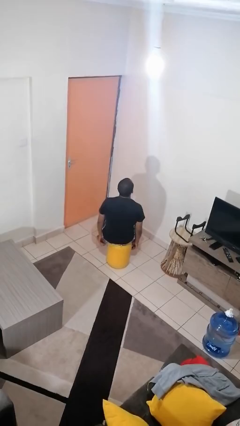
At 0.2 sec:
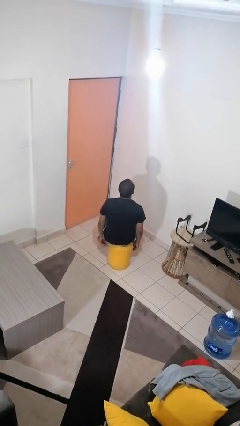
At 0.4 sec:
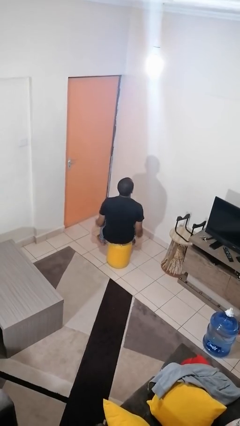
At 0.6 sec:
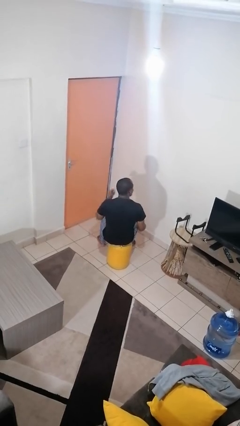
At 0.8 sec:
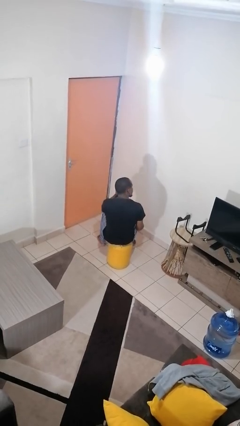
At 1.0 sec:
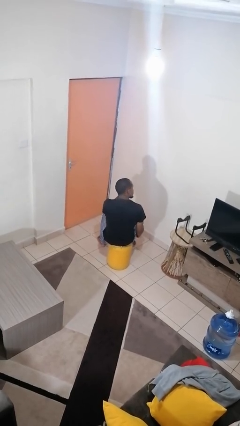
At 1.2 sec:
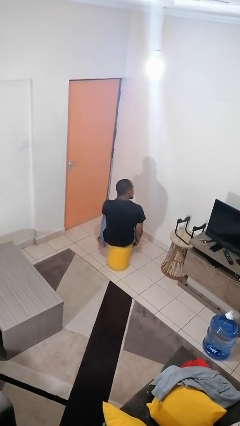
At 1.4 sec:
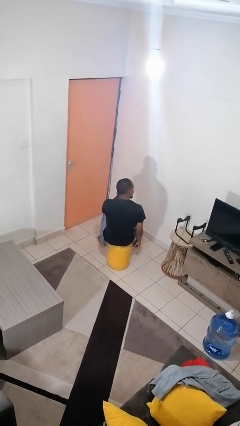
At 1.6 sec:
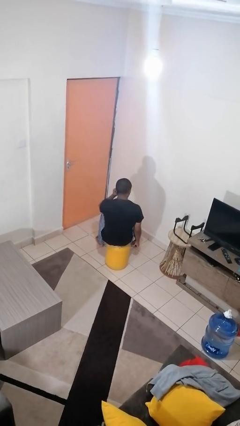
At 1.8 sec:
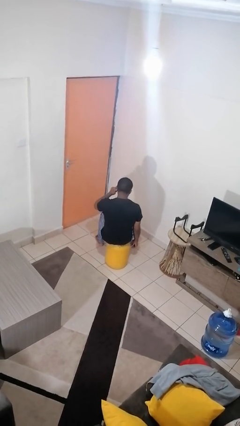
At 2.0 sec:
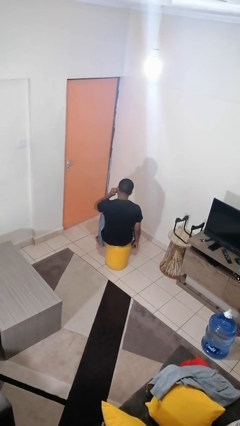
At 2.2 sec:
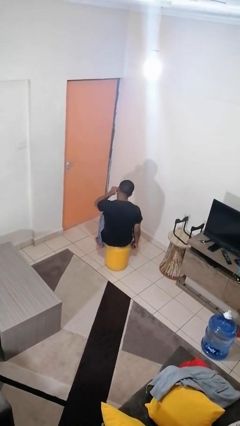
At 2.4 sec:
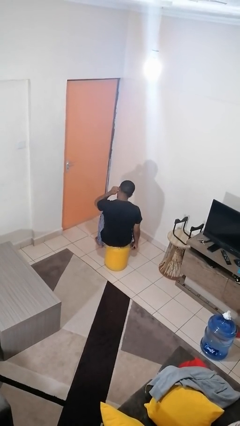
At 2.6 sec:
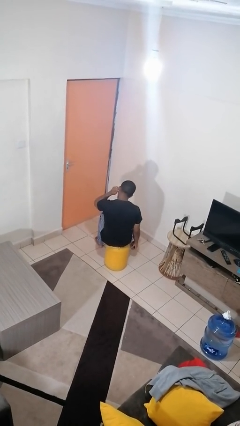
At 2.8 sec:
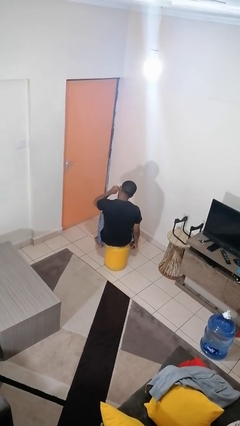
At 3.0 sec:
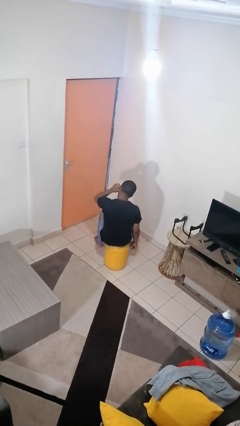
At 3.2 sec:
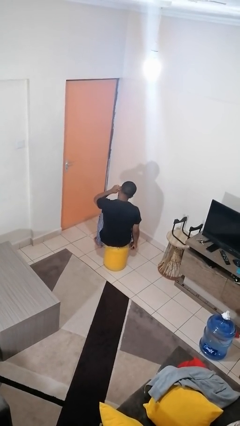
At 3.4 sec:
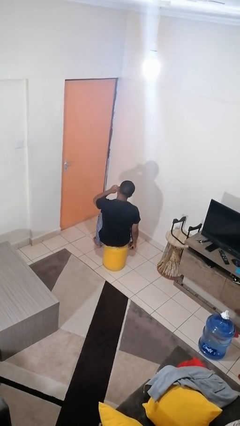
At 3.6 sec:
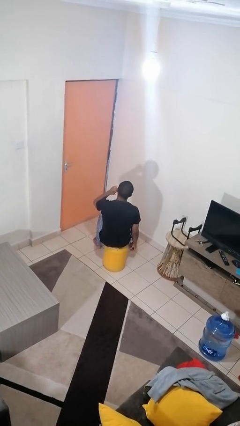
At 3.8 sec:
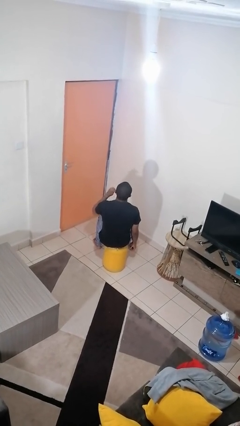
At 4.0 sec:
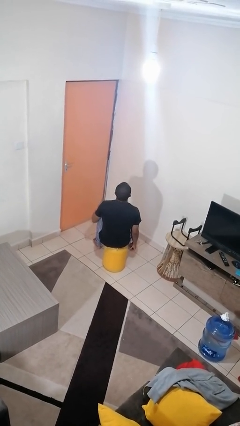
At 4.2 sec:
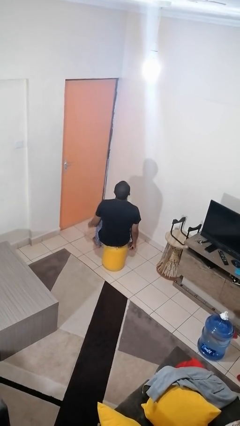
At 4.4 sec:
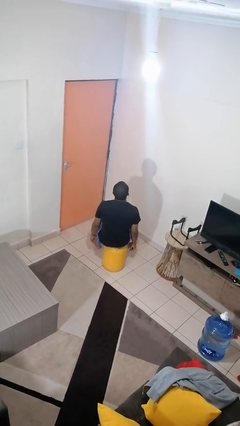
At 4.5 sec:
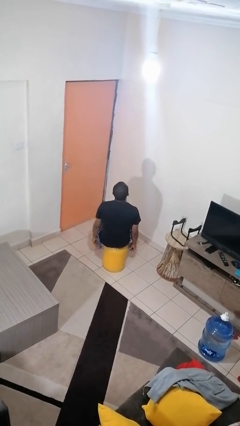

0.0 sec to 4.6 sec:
person touches earlobe

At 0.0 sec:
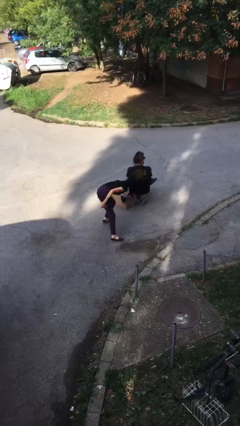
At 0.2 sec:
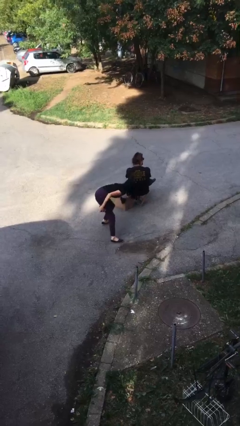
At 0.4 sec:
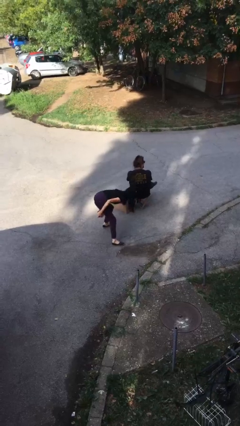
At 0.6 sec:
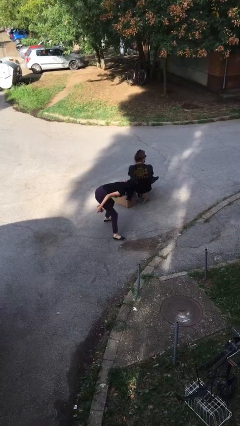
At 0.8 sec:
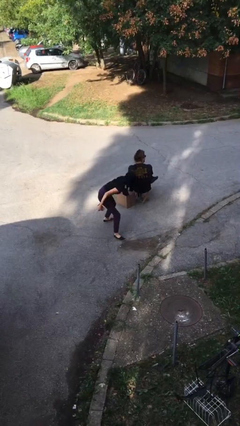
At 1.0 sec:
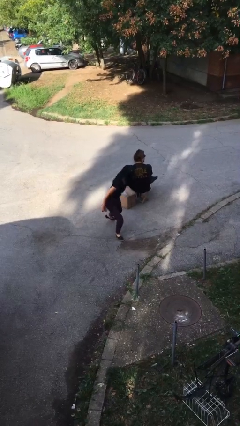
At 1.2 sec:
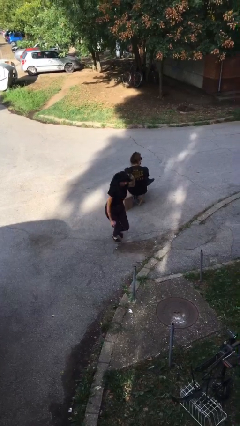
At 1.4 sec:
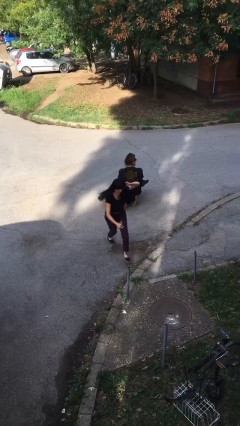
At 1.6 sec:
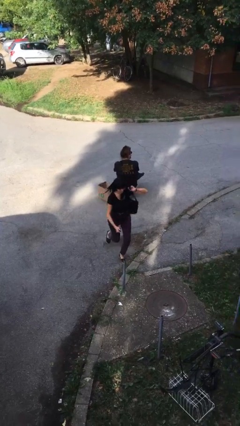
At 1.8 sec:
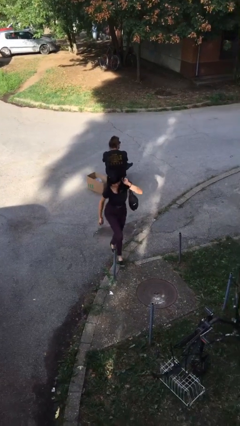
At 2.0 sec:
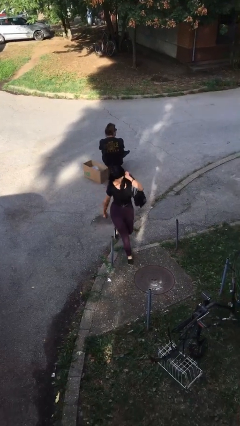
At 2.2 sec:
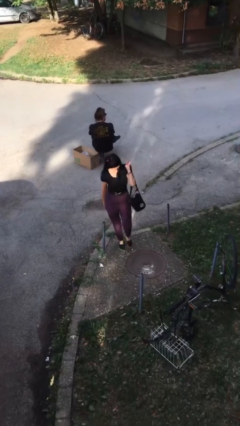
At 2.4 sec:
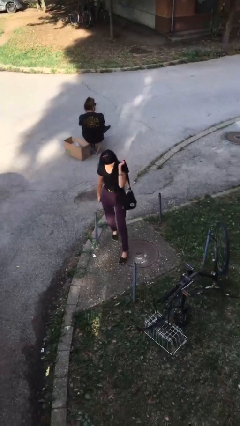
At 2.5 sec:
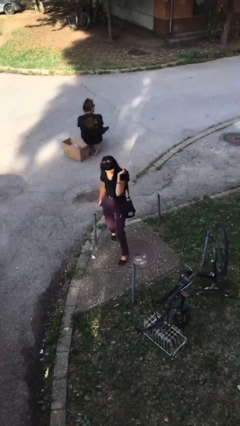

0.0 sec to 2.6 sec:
person steals object from person

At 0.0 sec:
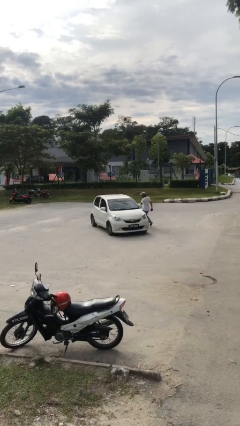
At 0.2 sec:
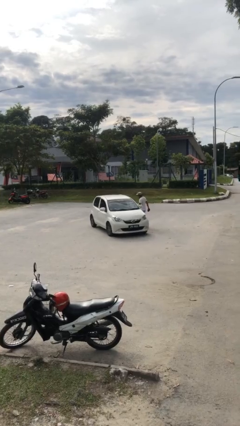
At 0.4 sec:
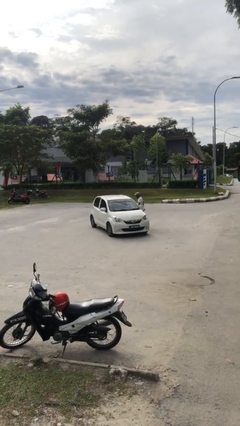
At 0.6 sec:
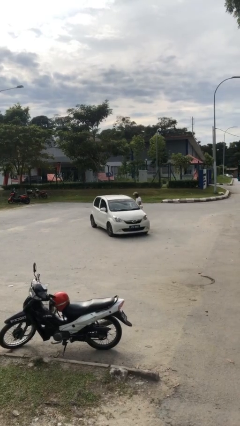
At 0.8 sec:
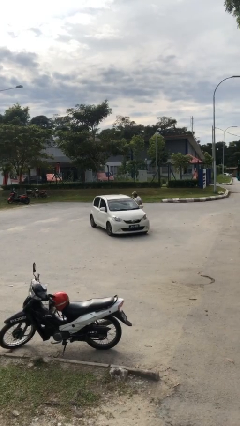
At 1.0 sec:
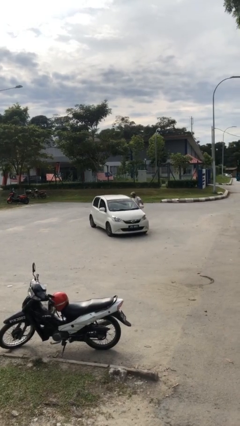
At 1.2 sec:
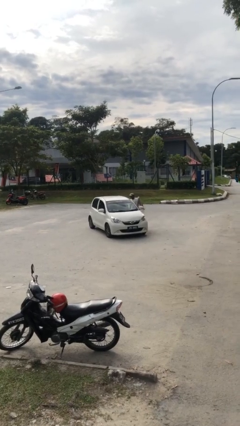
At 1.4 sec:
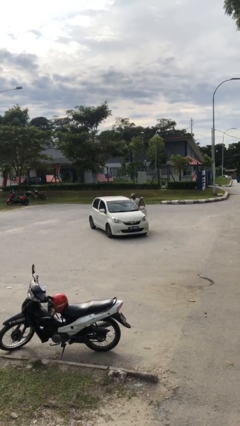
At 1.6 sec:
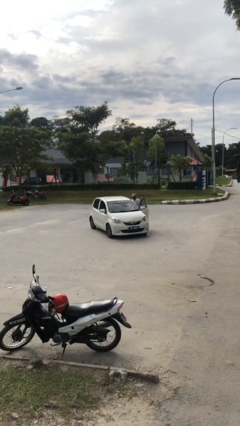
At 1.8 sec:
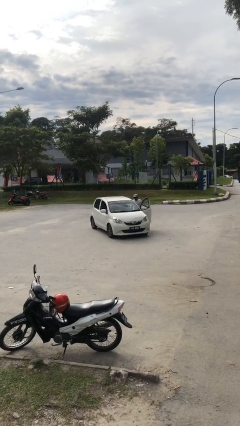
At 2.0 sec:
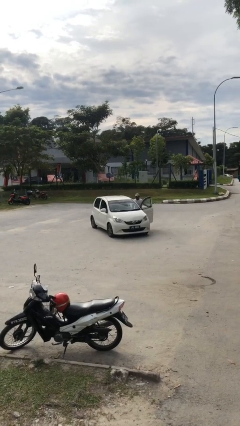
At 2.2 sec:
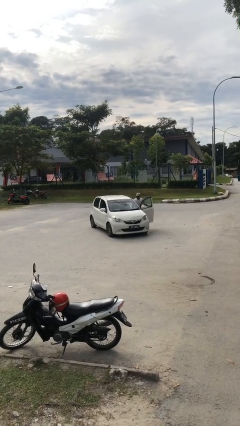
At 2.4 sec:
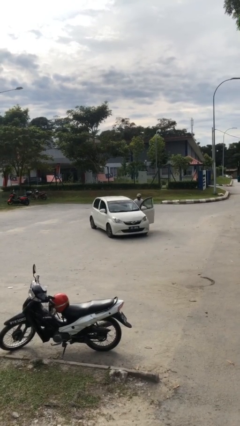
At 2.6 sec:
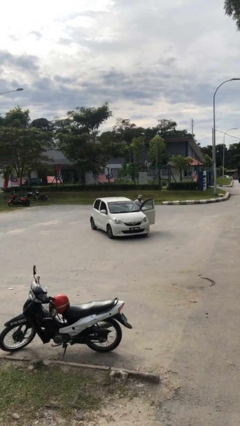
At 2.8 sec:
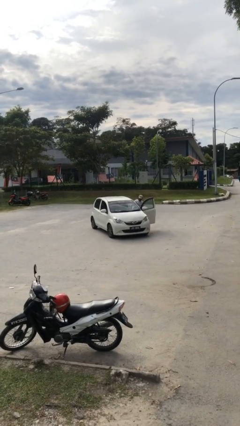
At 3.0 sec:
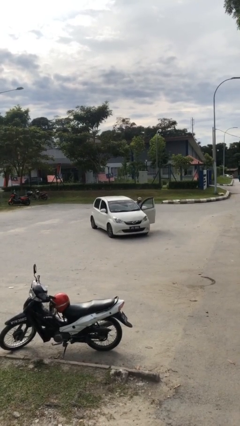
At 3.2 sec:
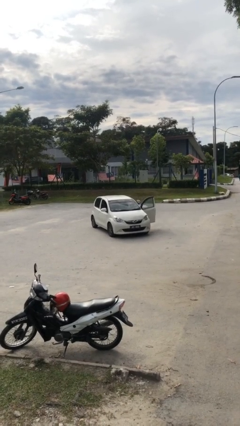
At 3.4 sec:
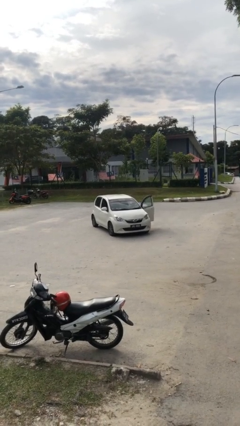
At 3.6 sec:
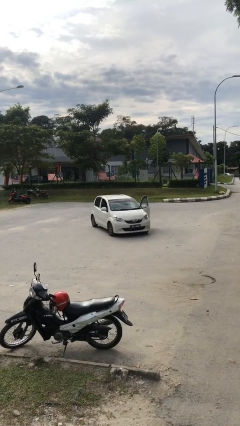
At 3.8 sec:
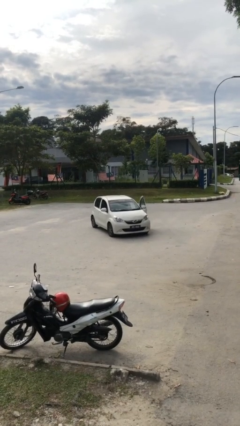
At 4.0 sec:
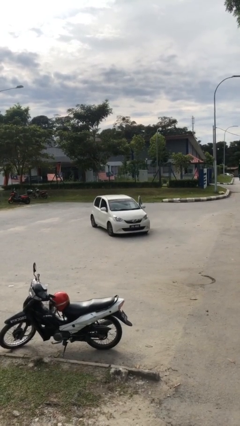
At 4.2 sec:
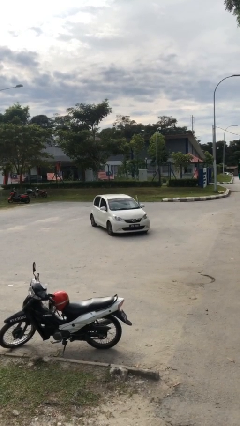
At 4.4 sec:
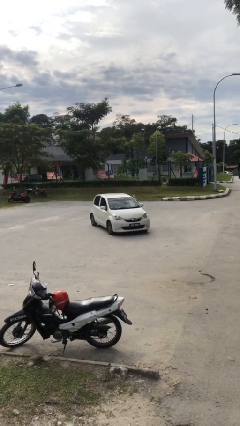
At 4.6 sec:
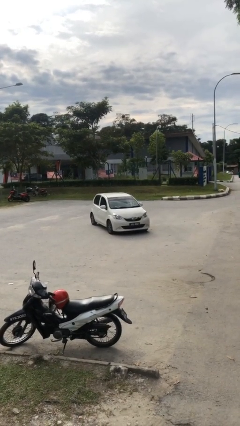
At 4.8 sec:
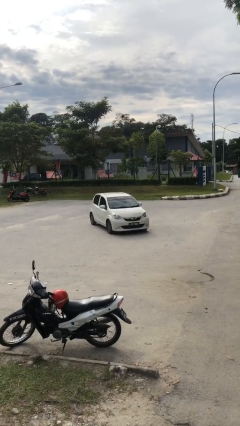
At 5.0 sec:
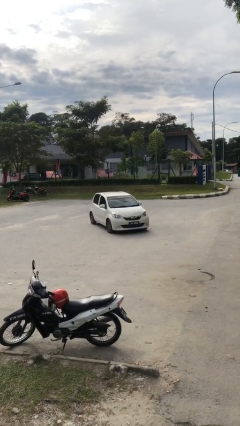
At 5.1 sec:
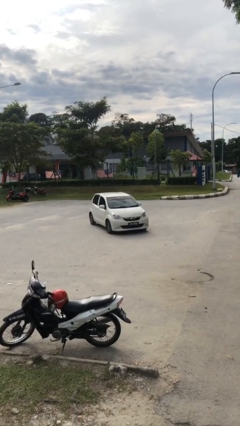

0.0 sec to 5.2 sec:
car picks up person

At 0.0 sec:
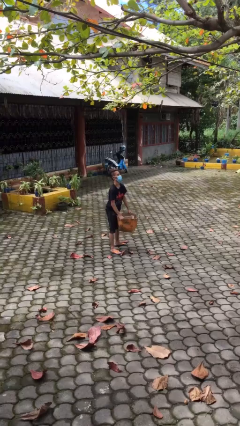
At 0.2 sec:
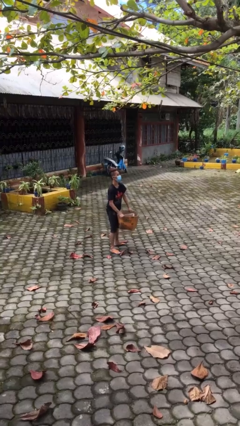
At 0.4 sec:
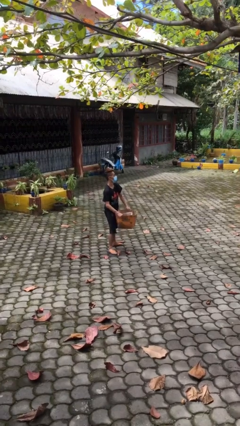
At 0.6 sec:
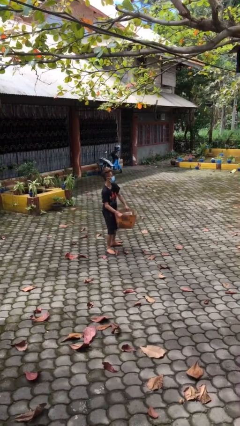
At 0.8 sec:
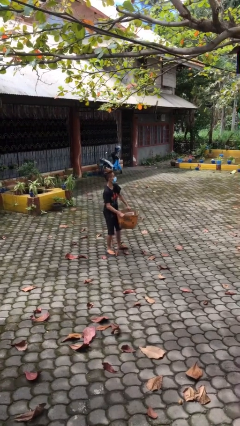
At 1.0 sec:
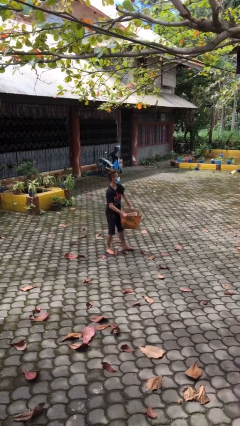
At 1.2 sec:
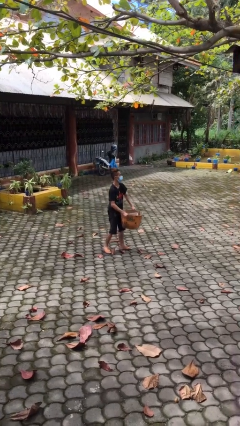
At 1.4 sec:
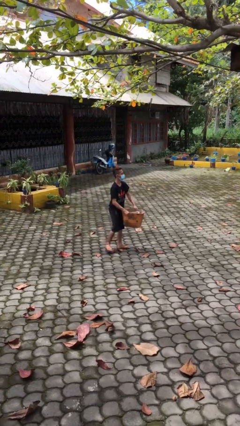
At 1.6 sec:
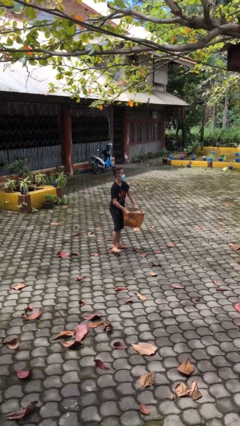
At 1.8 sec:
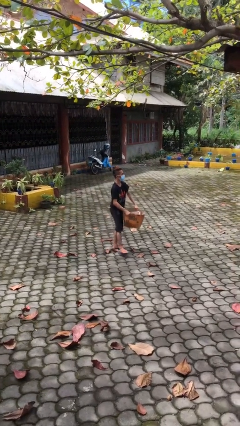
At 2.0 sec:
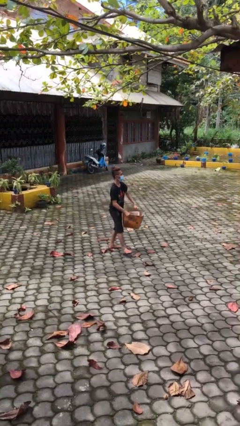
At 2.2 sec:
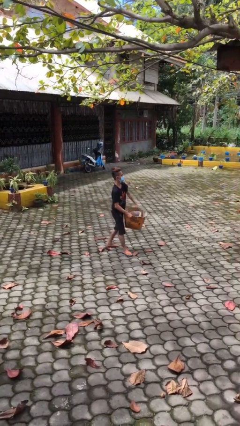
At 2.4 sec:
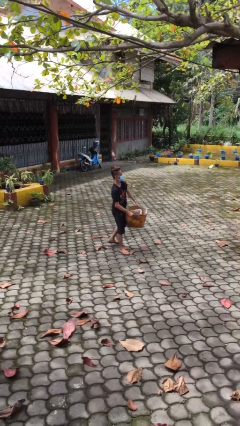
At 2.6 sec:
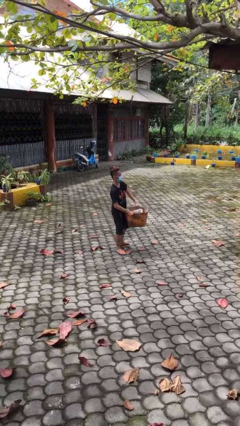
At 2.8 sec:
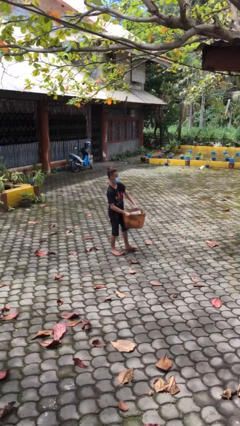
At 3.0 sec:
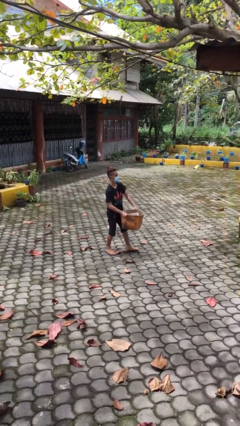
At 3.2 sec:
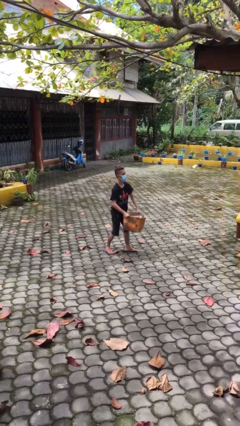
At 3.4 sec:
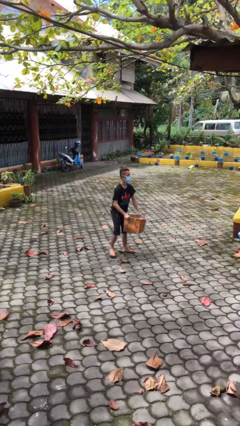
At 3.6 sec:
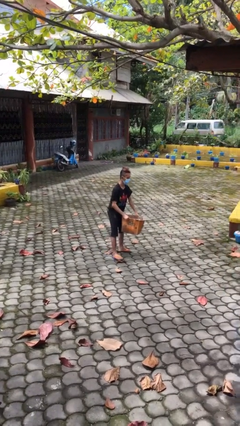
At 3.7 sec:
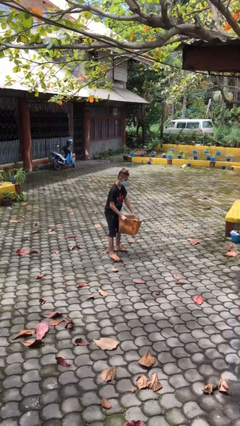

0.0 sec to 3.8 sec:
person carries heavy object

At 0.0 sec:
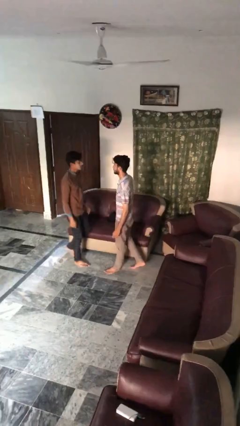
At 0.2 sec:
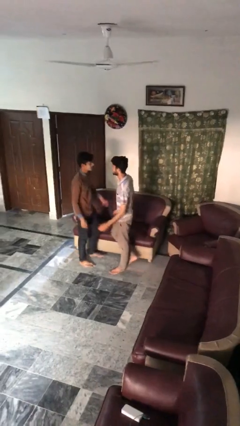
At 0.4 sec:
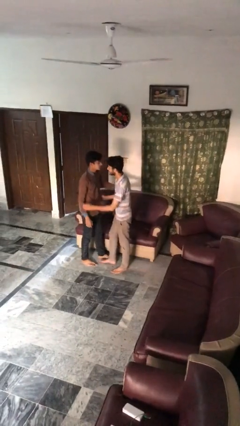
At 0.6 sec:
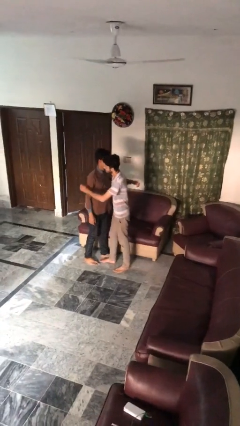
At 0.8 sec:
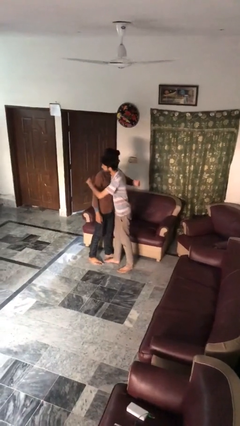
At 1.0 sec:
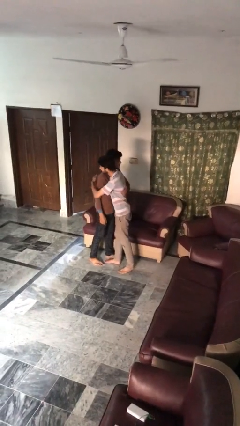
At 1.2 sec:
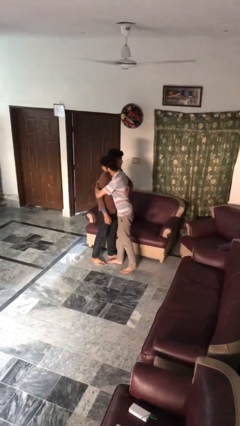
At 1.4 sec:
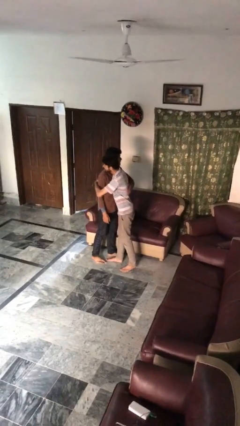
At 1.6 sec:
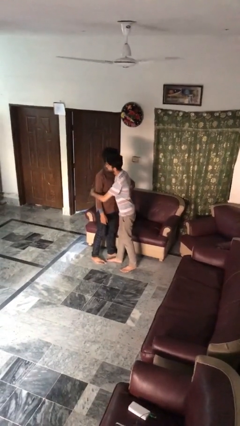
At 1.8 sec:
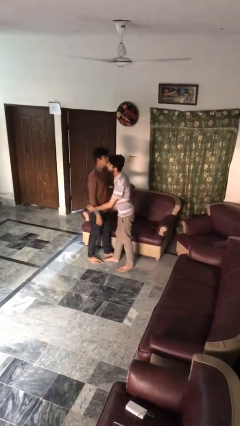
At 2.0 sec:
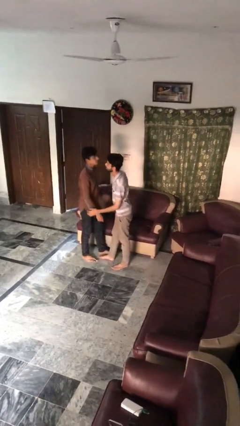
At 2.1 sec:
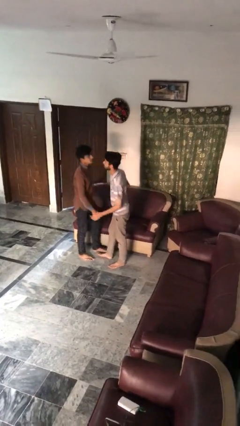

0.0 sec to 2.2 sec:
person embraces person
